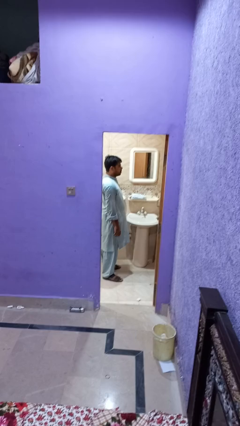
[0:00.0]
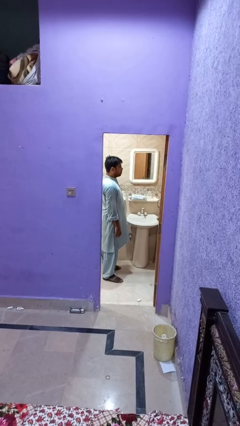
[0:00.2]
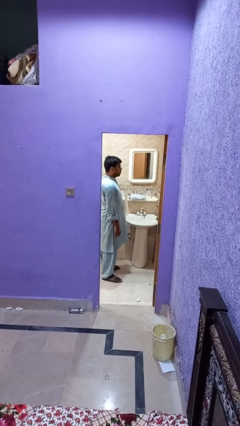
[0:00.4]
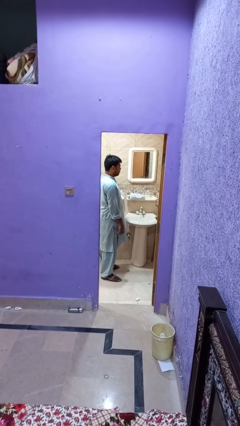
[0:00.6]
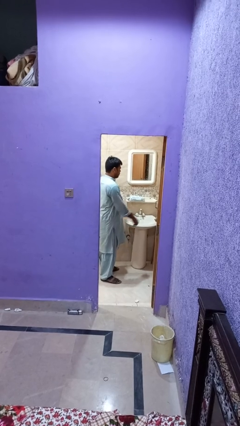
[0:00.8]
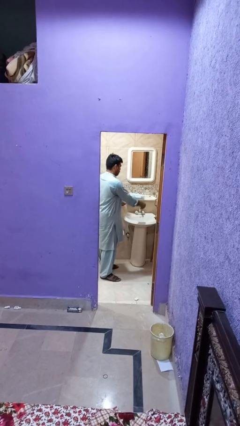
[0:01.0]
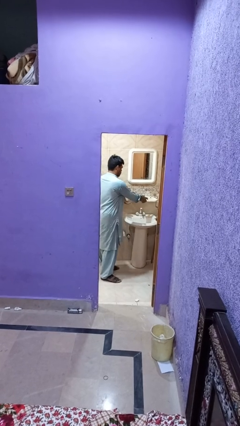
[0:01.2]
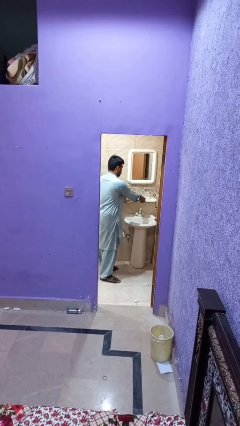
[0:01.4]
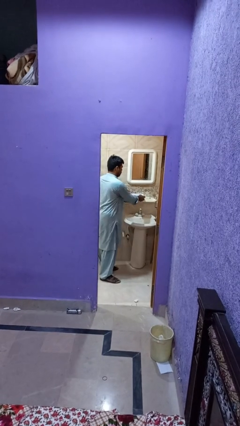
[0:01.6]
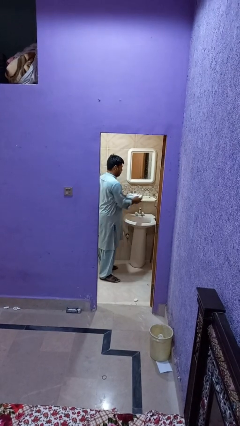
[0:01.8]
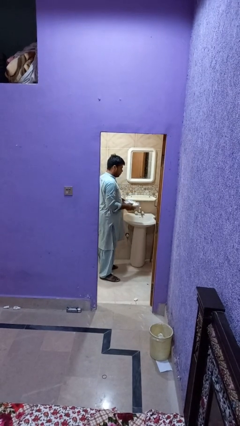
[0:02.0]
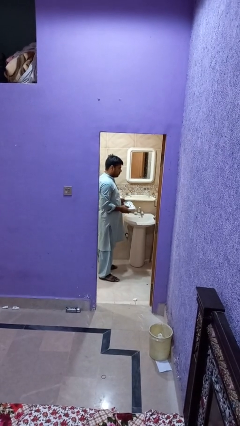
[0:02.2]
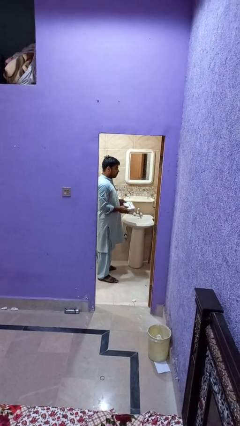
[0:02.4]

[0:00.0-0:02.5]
person picks up object from countertop

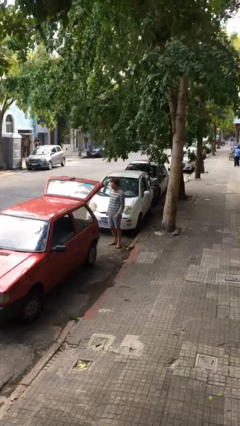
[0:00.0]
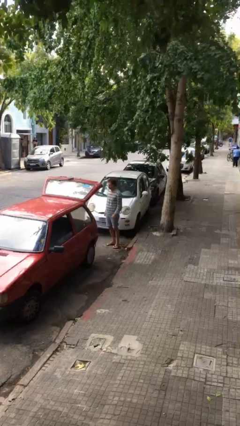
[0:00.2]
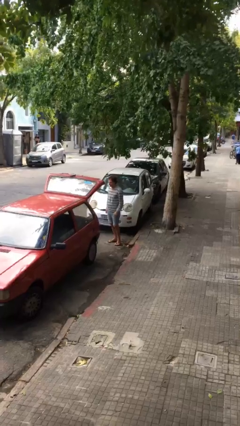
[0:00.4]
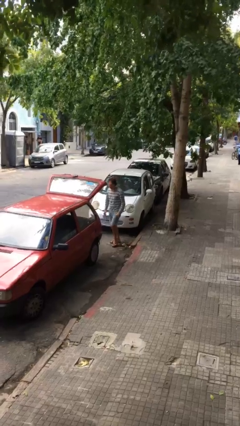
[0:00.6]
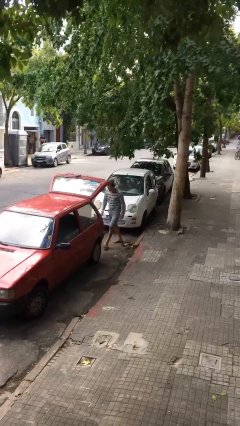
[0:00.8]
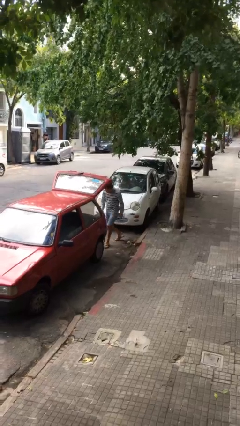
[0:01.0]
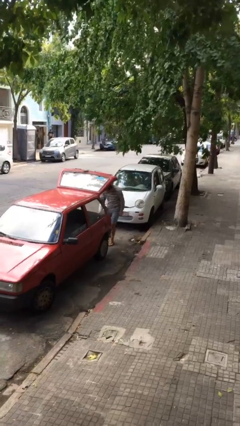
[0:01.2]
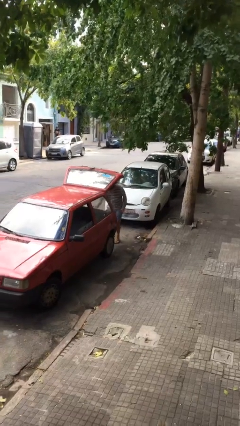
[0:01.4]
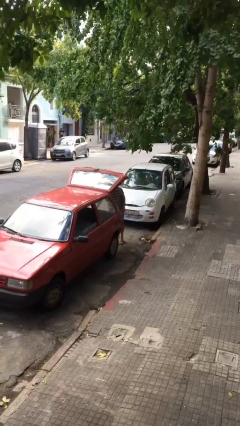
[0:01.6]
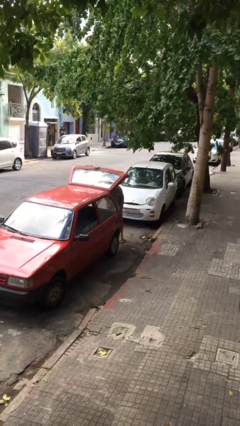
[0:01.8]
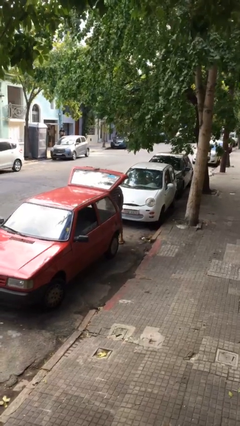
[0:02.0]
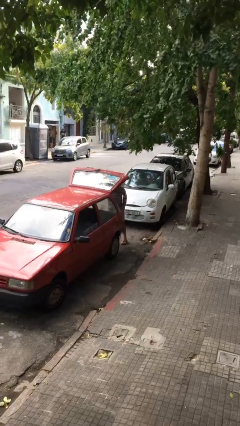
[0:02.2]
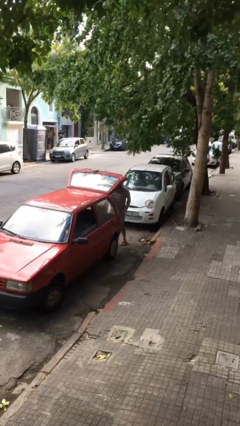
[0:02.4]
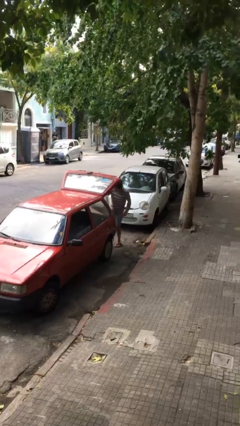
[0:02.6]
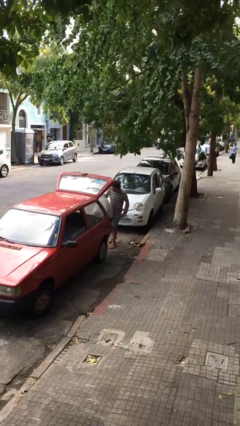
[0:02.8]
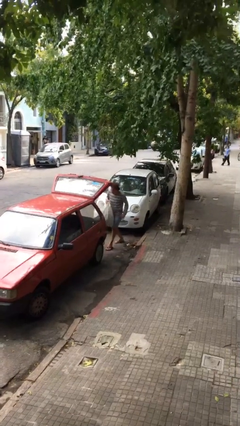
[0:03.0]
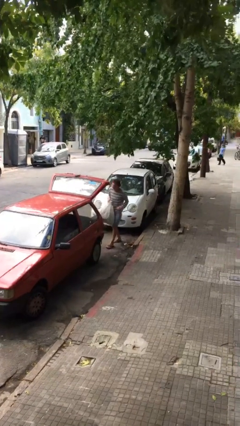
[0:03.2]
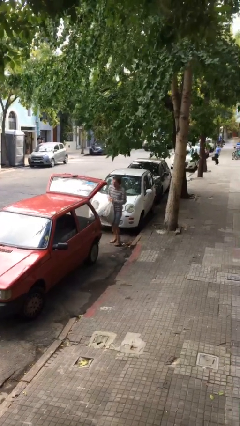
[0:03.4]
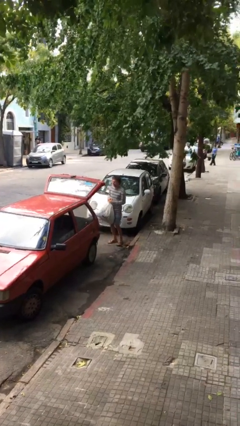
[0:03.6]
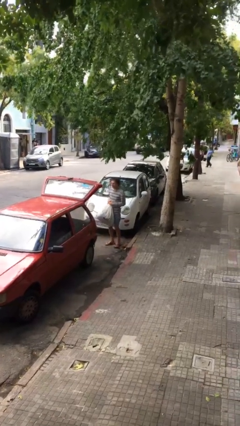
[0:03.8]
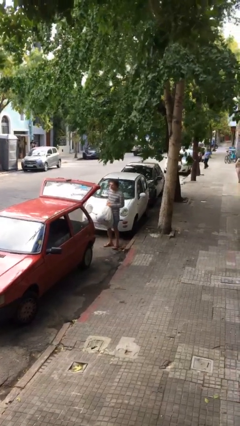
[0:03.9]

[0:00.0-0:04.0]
person unloads car

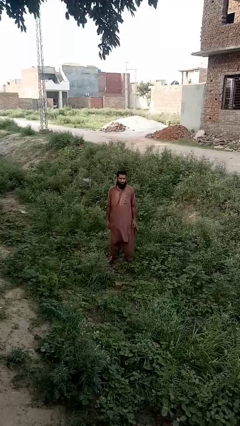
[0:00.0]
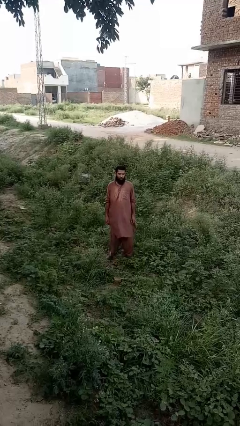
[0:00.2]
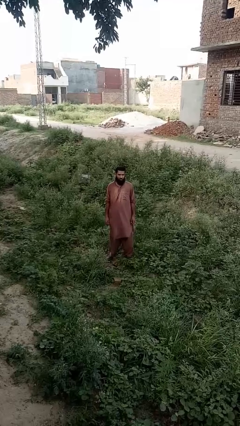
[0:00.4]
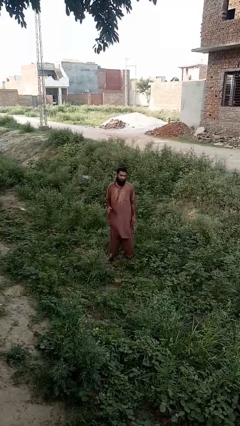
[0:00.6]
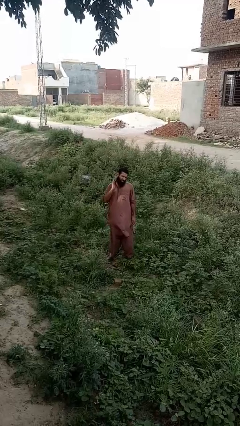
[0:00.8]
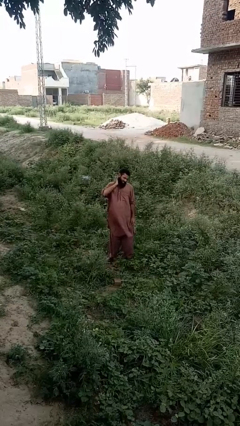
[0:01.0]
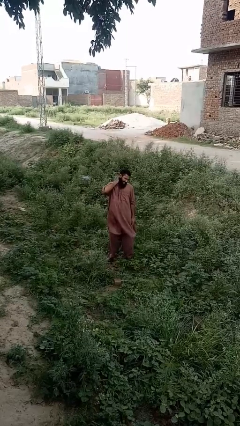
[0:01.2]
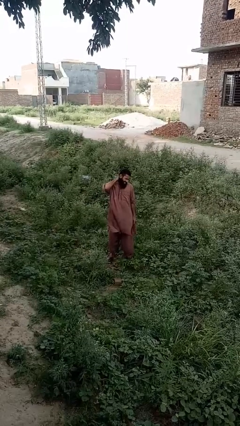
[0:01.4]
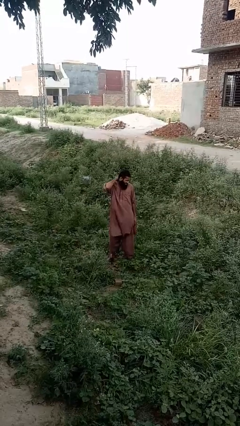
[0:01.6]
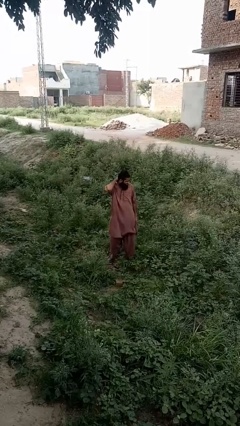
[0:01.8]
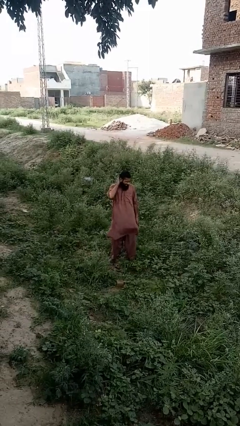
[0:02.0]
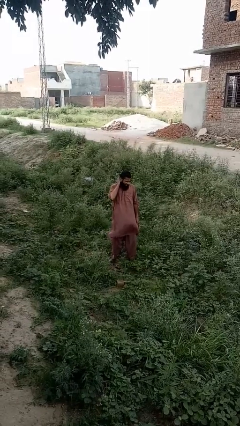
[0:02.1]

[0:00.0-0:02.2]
person rubs neck

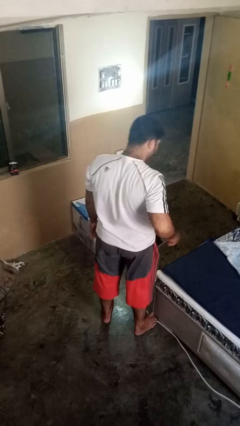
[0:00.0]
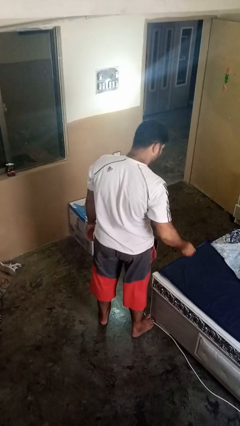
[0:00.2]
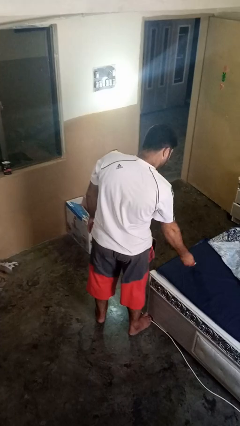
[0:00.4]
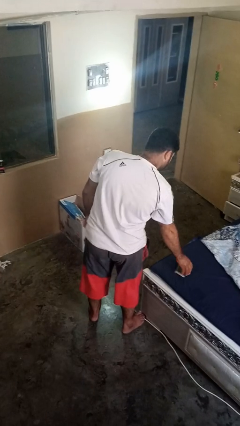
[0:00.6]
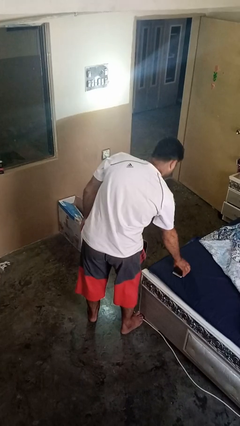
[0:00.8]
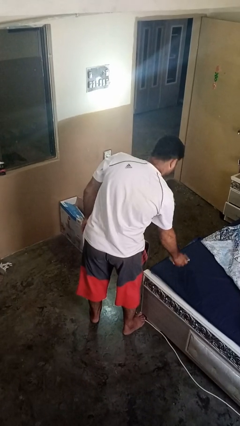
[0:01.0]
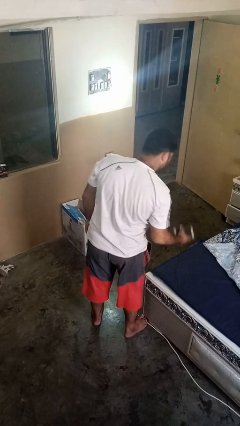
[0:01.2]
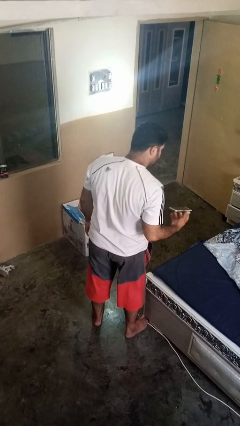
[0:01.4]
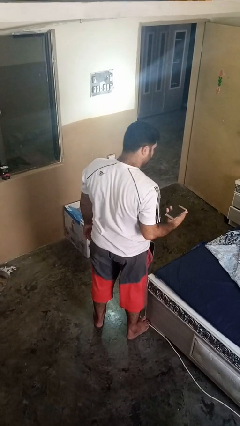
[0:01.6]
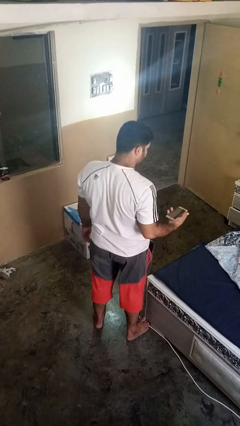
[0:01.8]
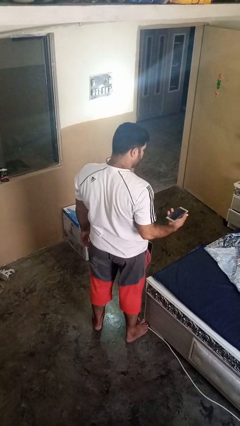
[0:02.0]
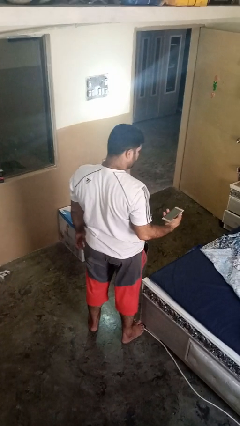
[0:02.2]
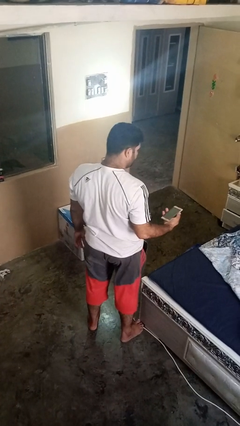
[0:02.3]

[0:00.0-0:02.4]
person takes phone from pocket

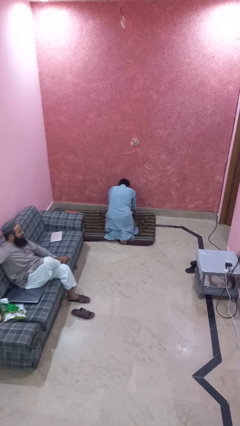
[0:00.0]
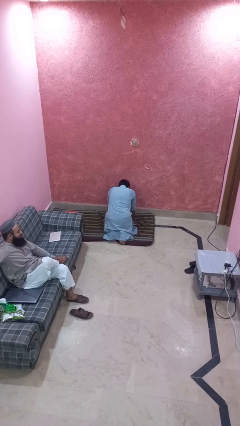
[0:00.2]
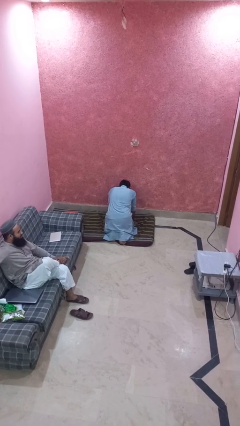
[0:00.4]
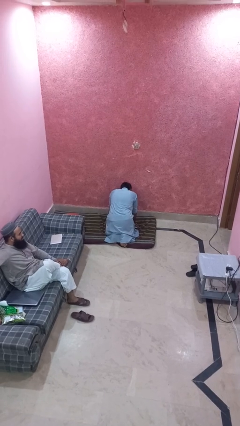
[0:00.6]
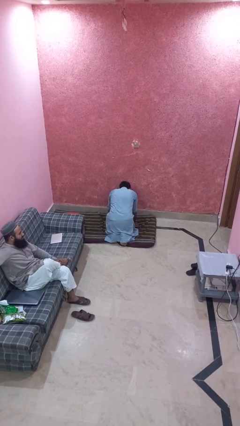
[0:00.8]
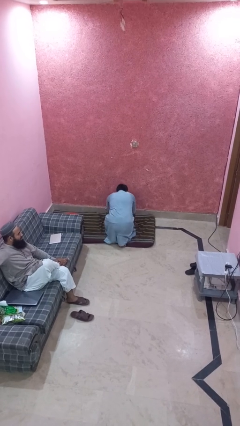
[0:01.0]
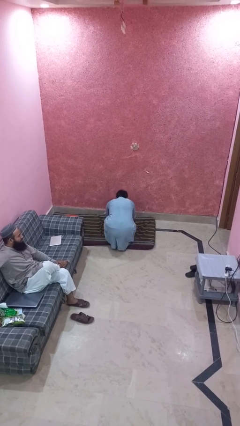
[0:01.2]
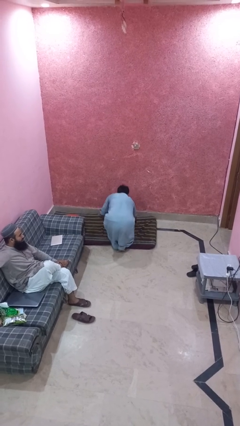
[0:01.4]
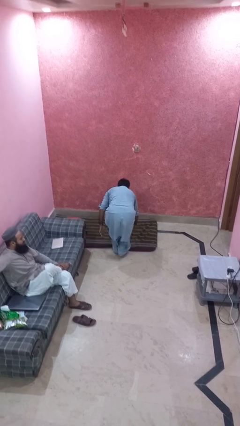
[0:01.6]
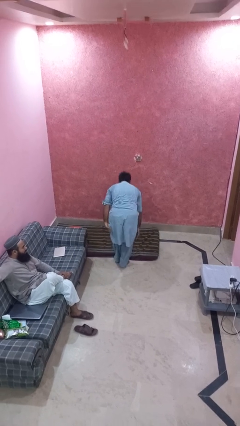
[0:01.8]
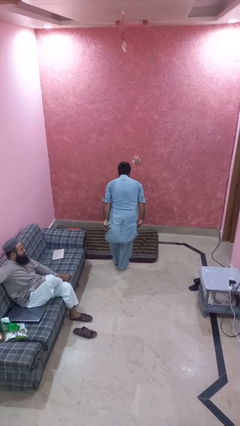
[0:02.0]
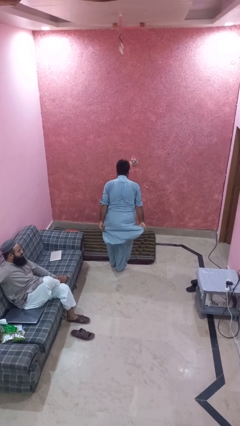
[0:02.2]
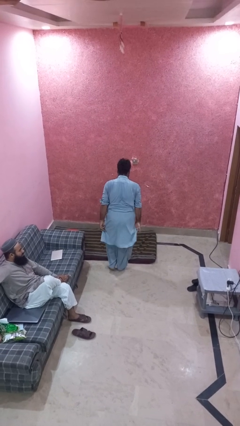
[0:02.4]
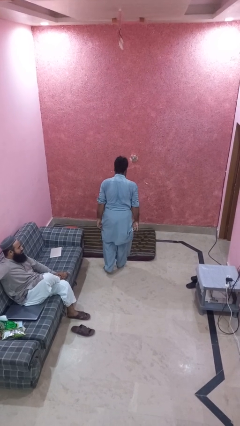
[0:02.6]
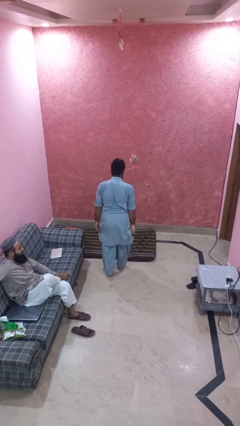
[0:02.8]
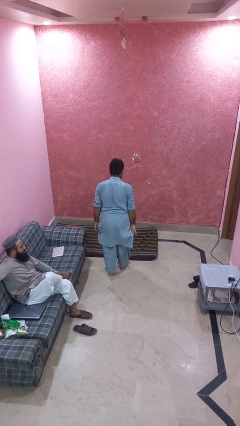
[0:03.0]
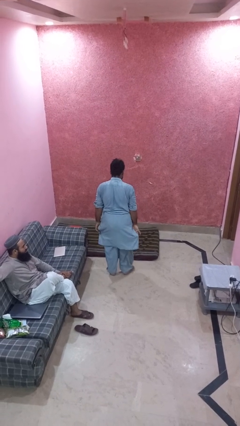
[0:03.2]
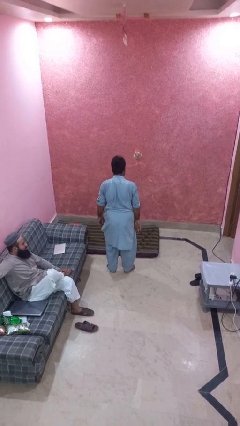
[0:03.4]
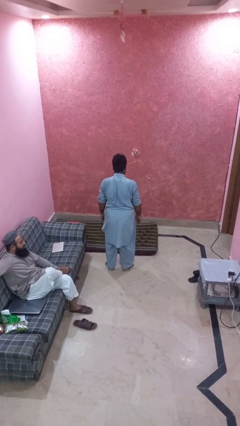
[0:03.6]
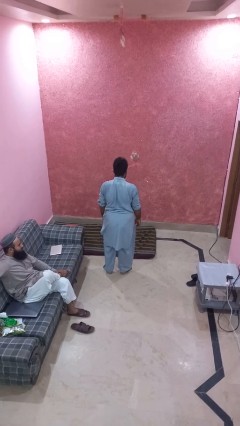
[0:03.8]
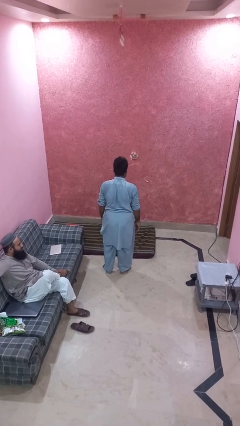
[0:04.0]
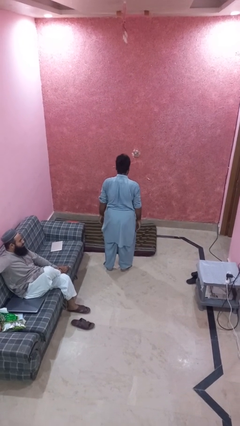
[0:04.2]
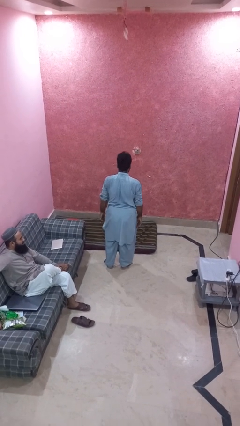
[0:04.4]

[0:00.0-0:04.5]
person stands up from floor

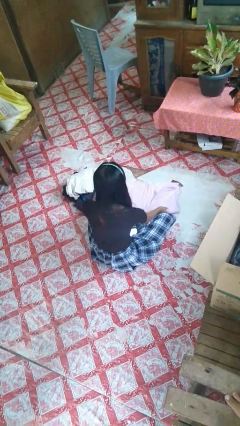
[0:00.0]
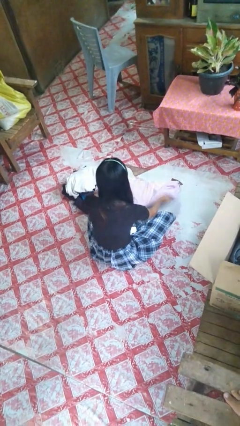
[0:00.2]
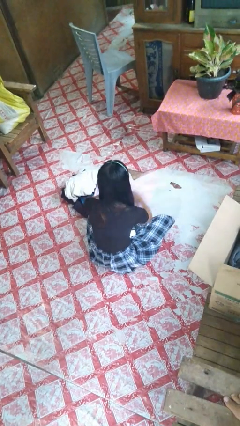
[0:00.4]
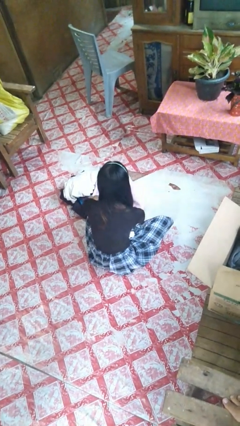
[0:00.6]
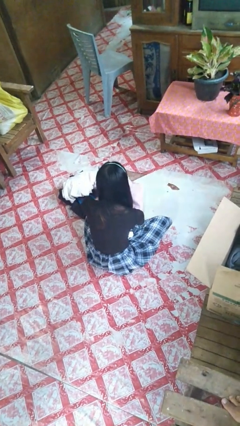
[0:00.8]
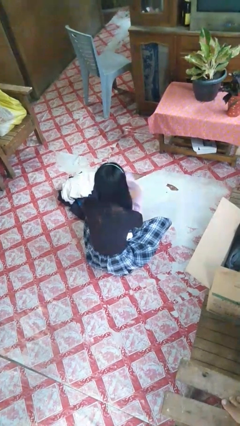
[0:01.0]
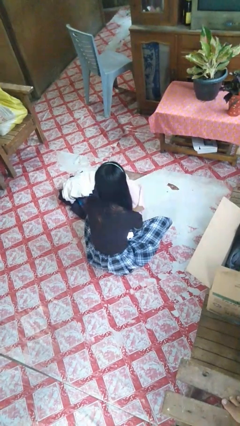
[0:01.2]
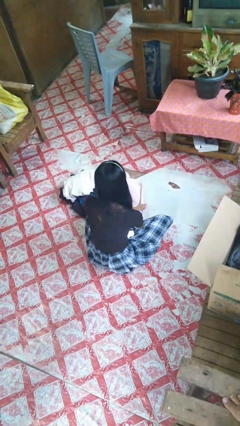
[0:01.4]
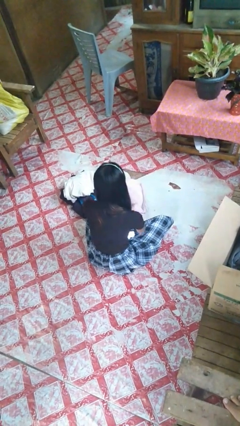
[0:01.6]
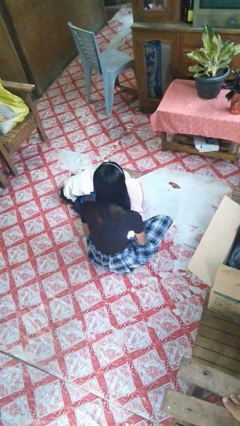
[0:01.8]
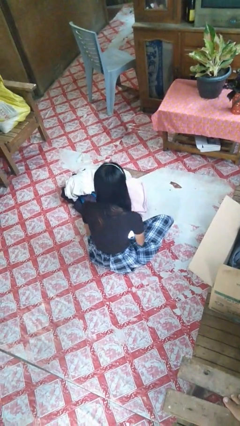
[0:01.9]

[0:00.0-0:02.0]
person folds towel

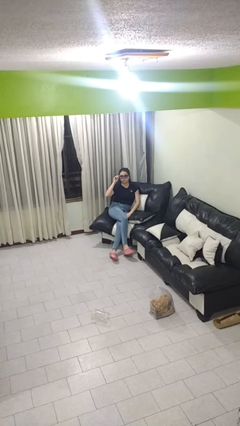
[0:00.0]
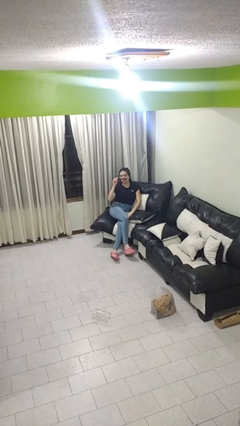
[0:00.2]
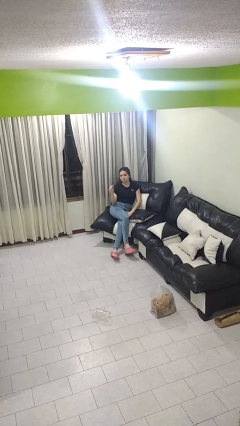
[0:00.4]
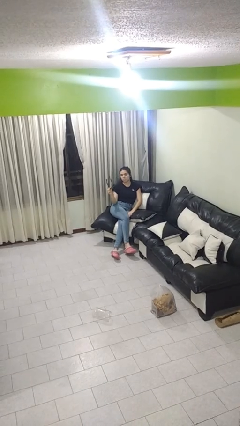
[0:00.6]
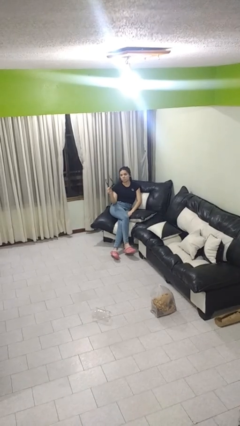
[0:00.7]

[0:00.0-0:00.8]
person takes off sunglasses
